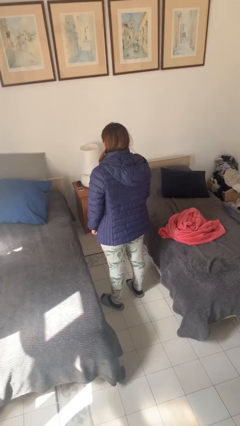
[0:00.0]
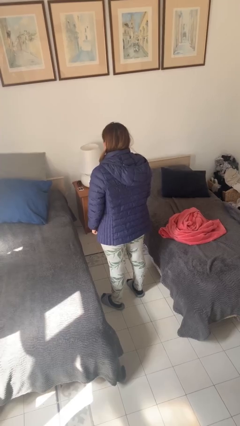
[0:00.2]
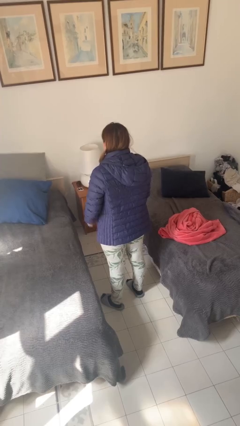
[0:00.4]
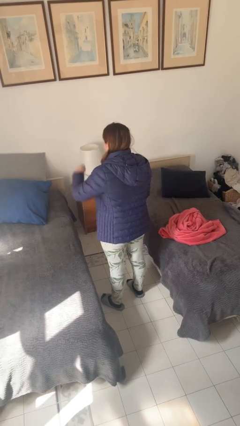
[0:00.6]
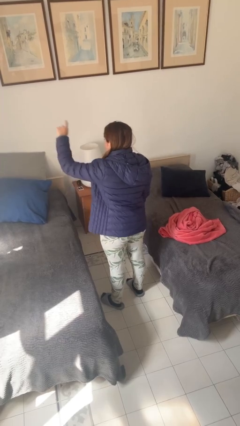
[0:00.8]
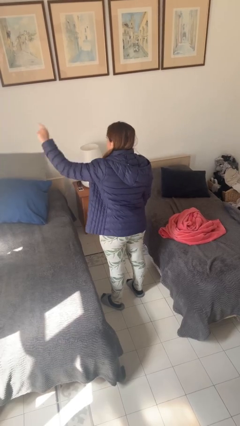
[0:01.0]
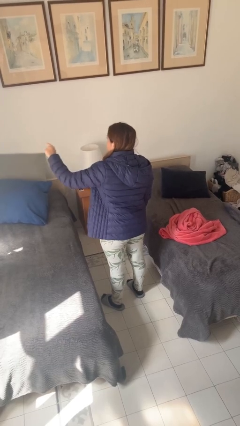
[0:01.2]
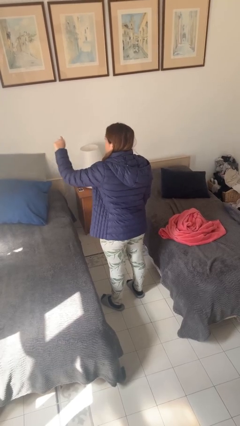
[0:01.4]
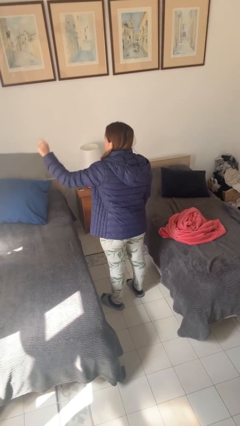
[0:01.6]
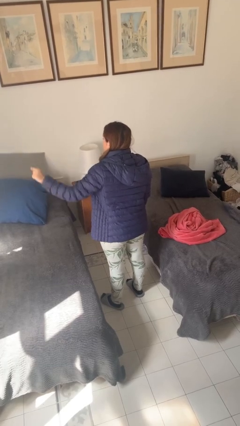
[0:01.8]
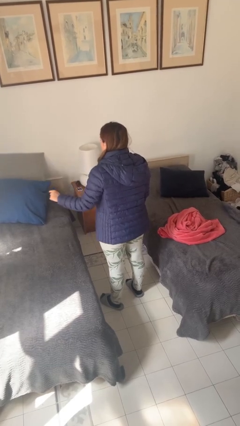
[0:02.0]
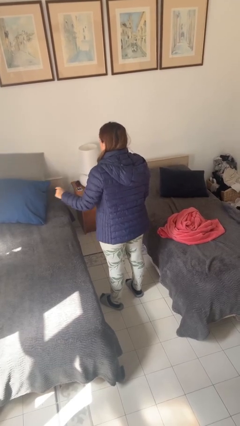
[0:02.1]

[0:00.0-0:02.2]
person gestures number three

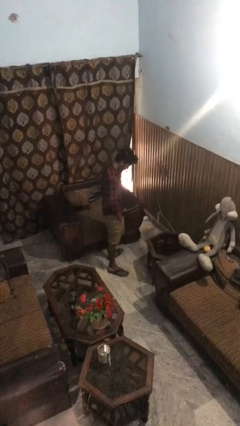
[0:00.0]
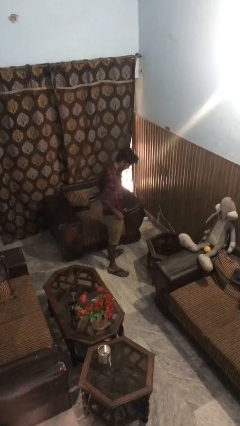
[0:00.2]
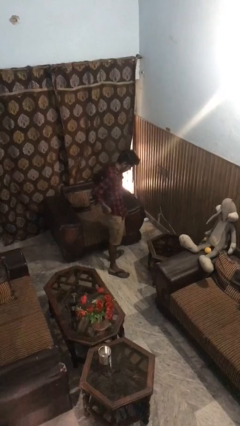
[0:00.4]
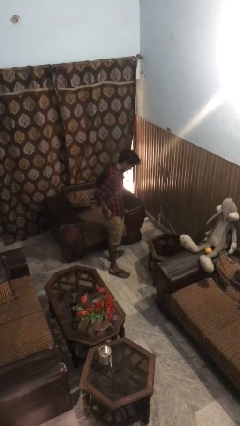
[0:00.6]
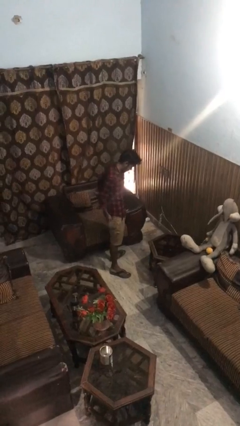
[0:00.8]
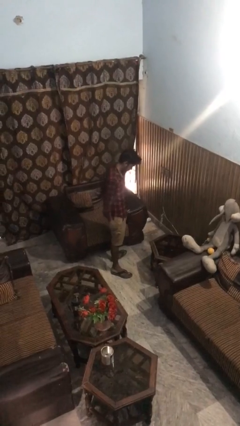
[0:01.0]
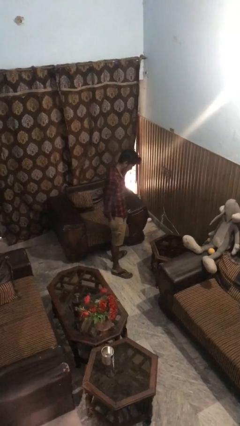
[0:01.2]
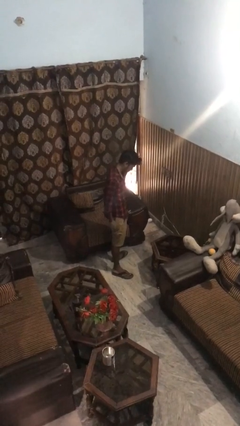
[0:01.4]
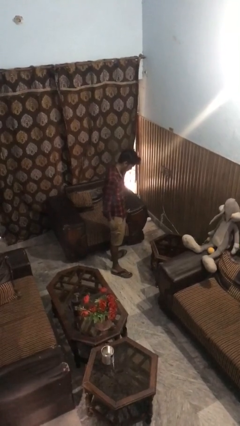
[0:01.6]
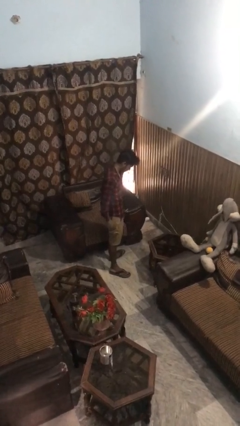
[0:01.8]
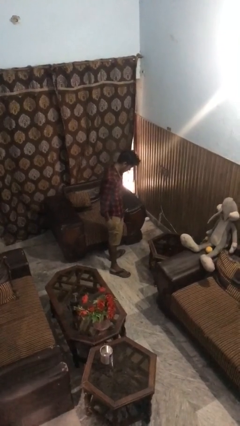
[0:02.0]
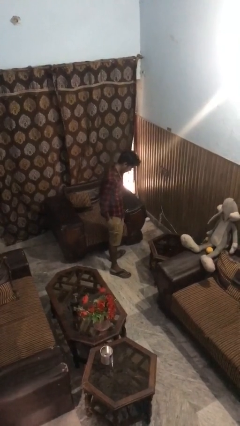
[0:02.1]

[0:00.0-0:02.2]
person puts hands in back pockets

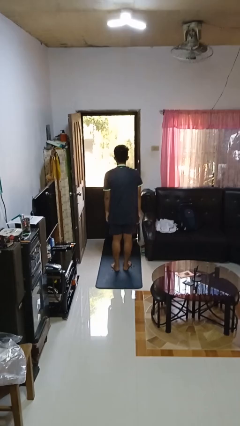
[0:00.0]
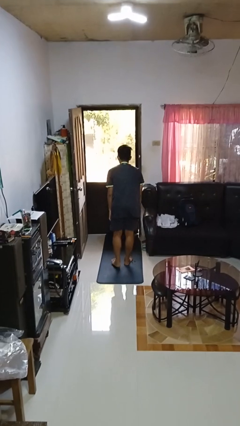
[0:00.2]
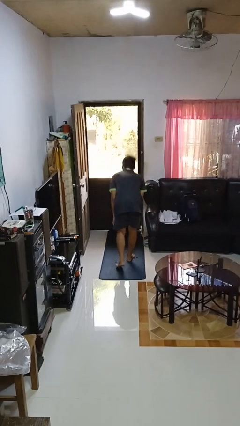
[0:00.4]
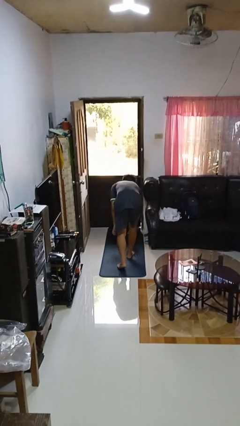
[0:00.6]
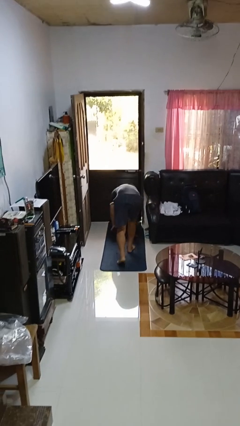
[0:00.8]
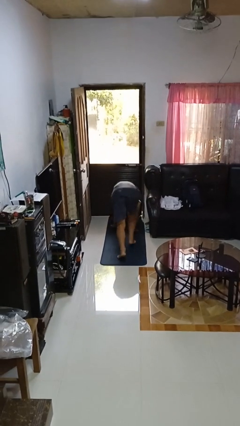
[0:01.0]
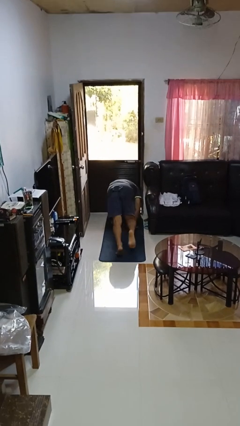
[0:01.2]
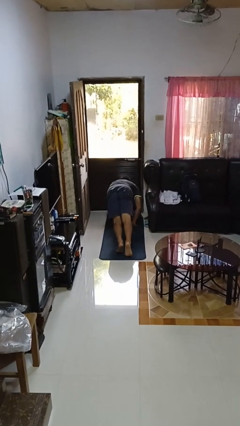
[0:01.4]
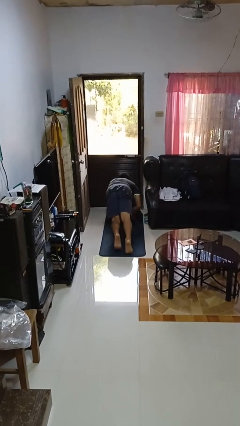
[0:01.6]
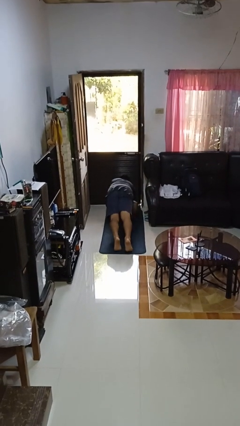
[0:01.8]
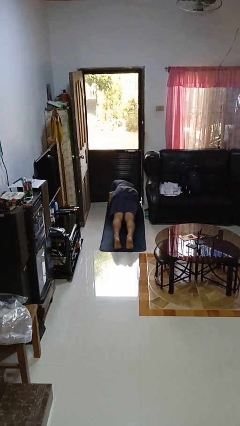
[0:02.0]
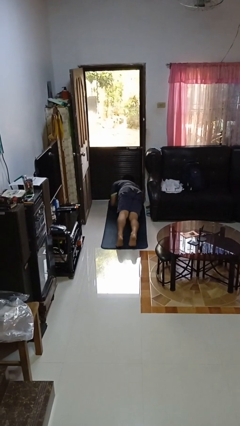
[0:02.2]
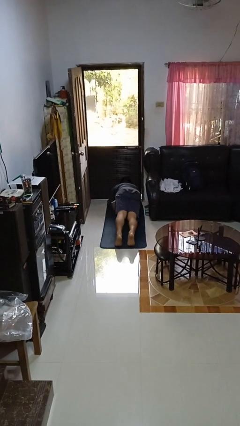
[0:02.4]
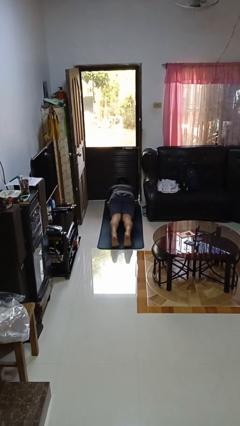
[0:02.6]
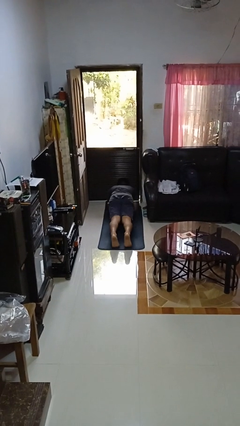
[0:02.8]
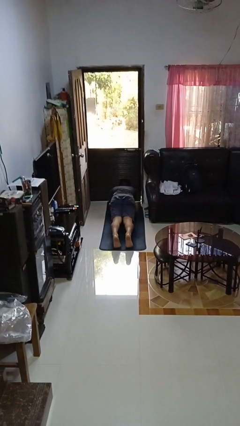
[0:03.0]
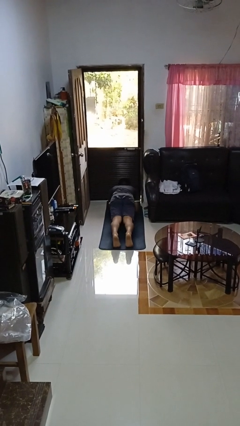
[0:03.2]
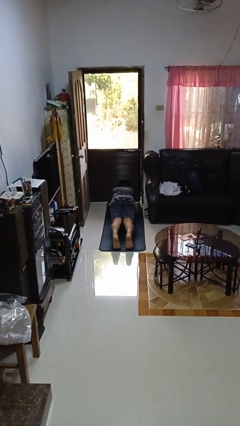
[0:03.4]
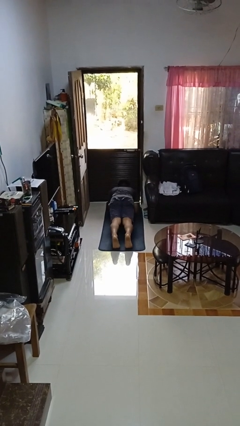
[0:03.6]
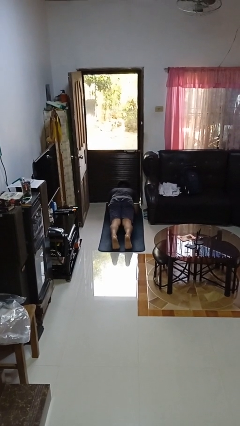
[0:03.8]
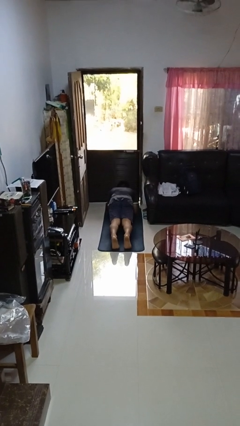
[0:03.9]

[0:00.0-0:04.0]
person exercises with plank

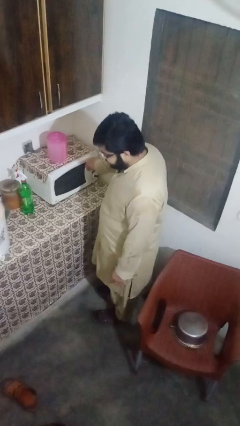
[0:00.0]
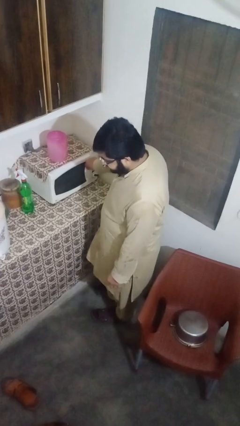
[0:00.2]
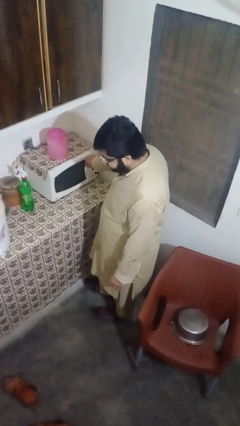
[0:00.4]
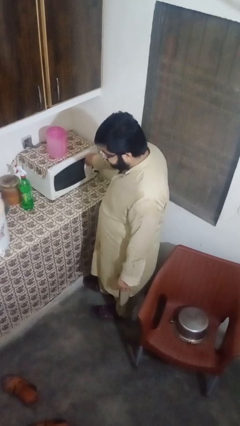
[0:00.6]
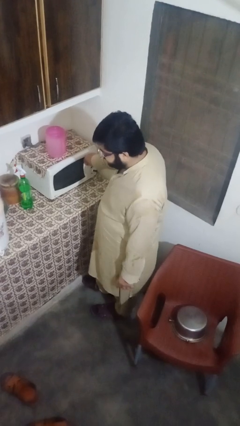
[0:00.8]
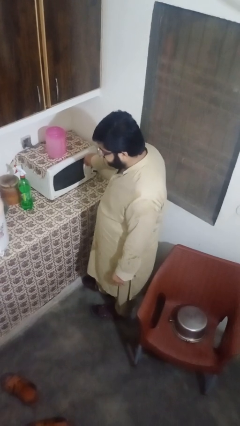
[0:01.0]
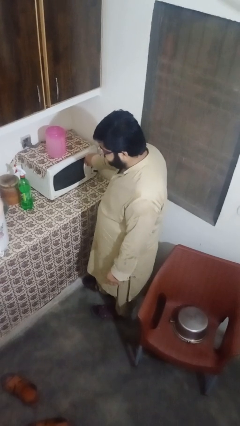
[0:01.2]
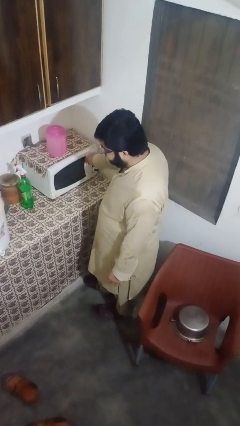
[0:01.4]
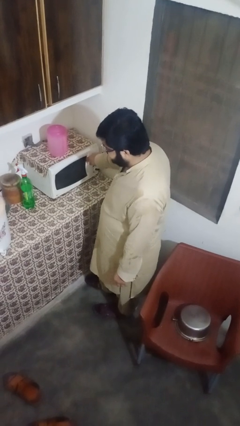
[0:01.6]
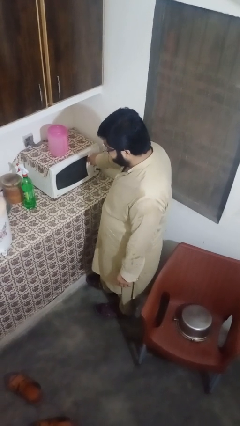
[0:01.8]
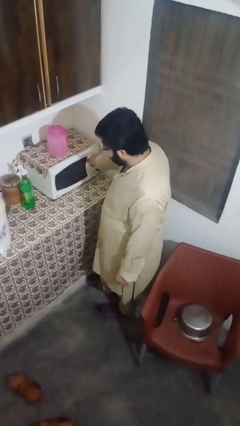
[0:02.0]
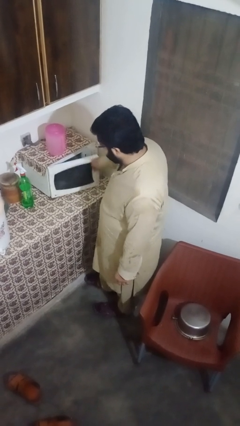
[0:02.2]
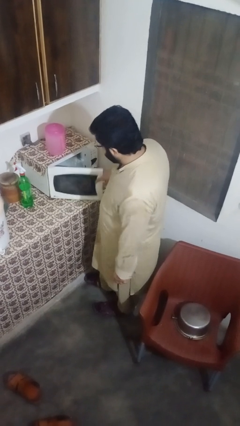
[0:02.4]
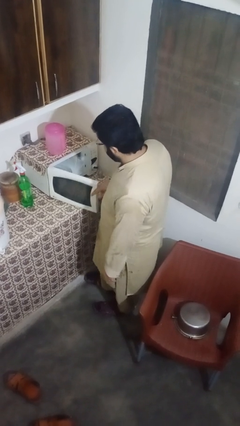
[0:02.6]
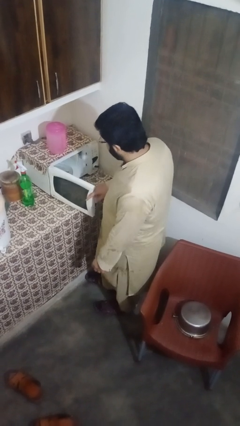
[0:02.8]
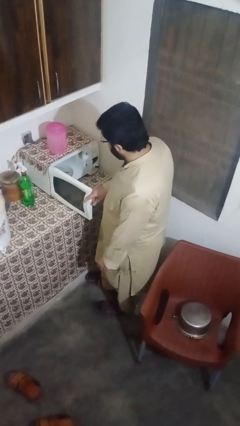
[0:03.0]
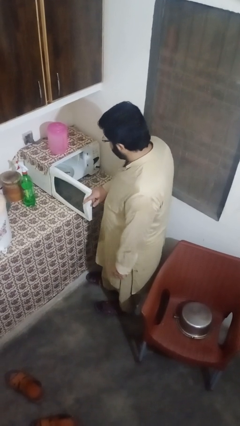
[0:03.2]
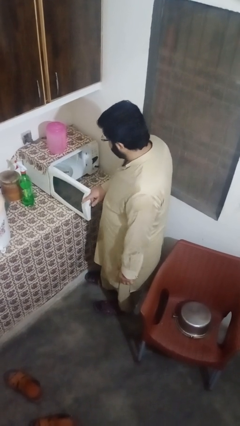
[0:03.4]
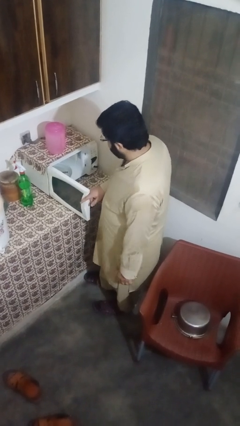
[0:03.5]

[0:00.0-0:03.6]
person opens microwave

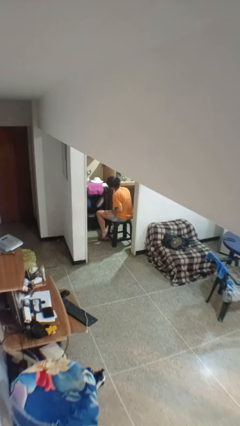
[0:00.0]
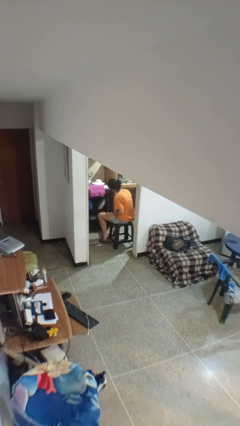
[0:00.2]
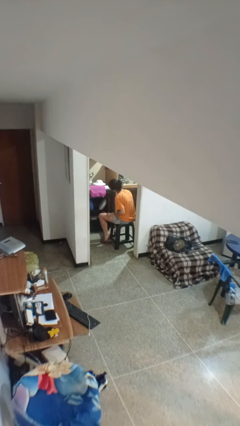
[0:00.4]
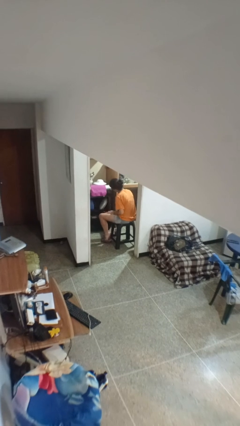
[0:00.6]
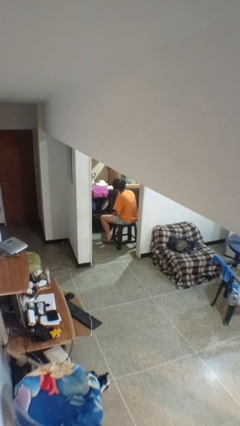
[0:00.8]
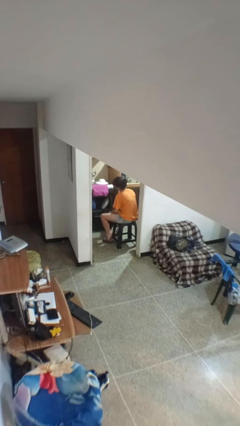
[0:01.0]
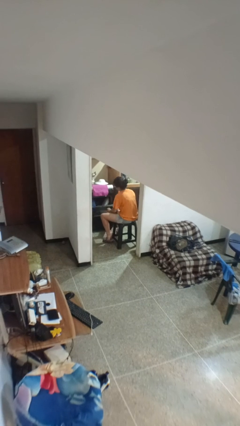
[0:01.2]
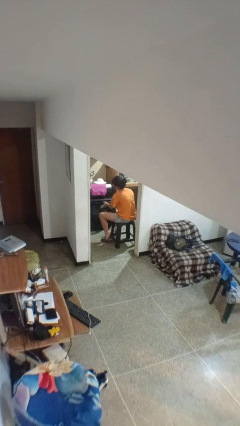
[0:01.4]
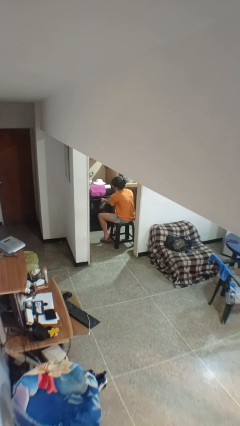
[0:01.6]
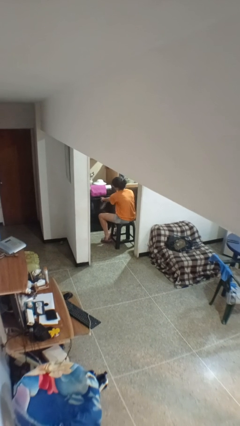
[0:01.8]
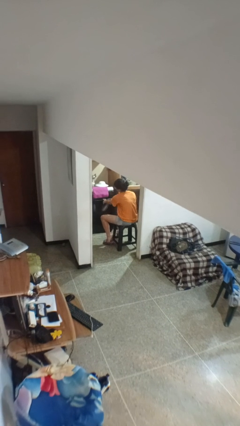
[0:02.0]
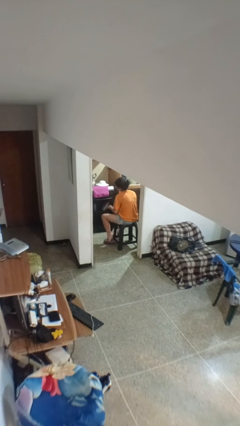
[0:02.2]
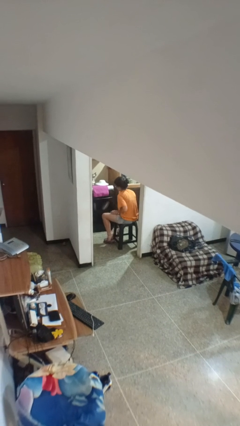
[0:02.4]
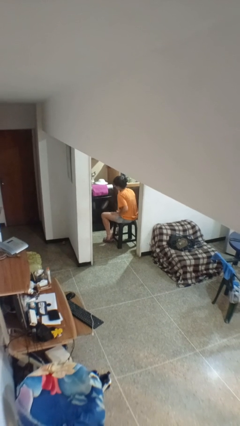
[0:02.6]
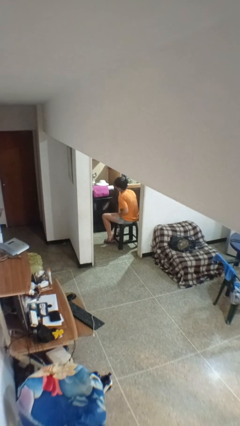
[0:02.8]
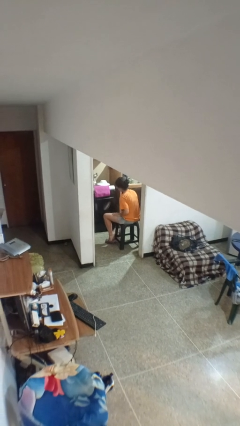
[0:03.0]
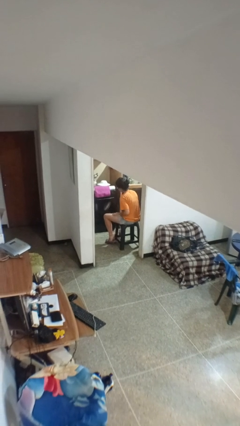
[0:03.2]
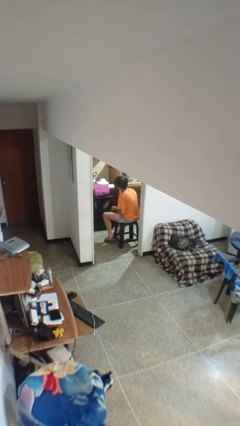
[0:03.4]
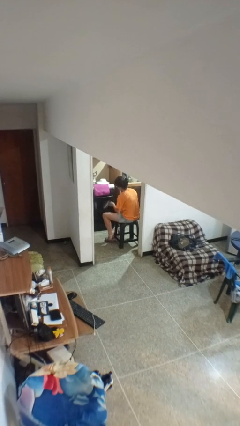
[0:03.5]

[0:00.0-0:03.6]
person closes dishwasher

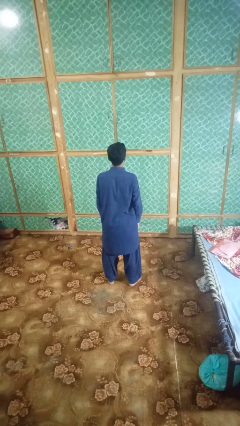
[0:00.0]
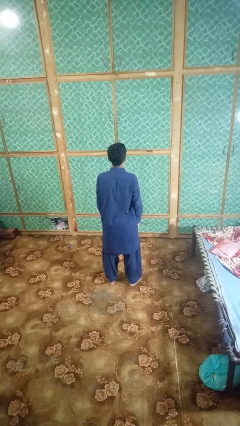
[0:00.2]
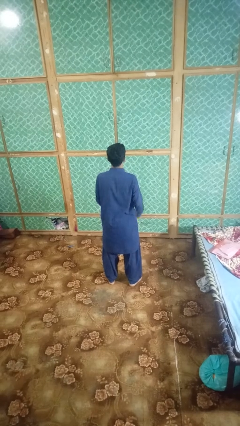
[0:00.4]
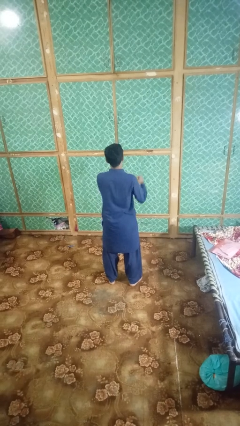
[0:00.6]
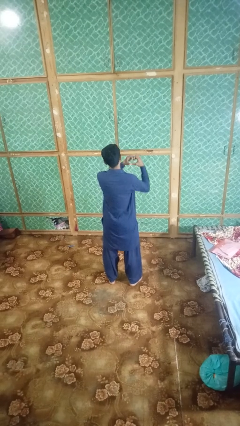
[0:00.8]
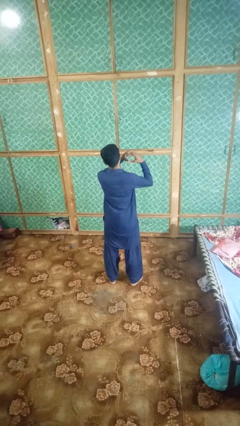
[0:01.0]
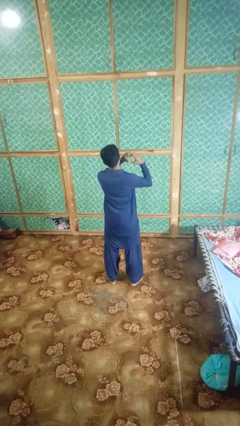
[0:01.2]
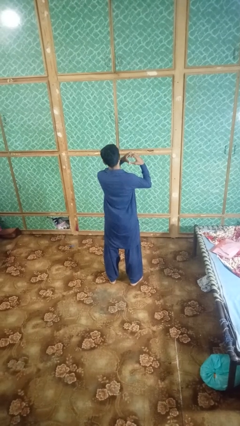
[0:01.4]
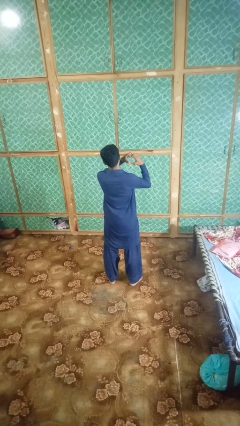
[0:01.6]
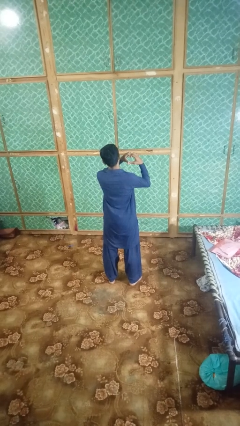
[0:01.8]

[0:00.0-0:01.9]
person gestures heart
